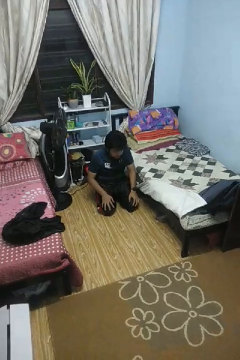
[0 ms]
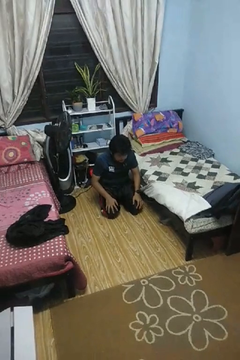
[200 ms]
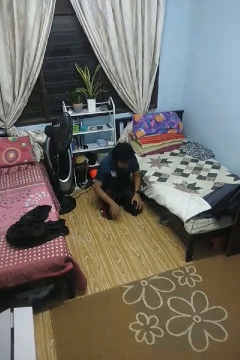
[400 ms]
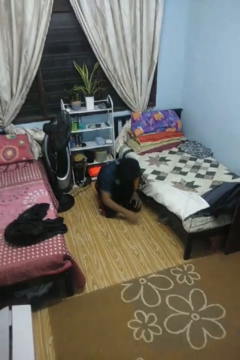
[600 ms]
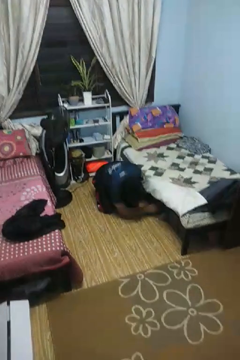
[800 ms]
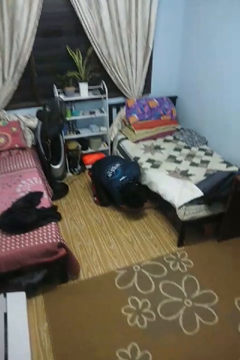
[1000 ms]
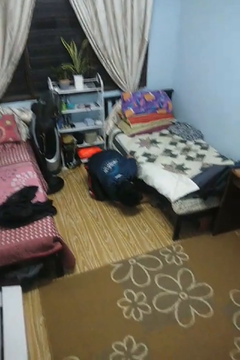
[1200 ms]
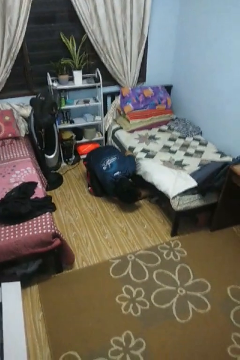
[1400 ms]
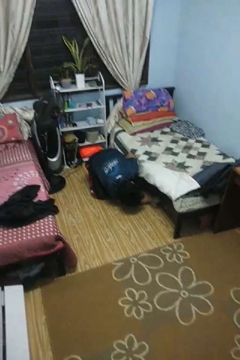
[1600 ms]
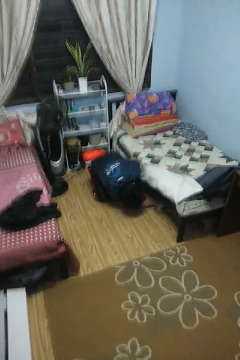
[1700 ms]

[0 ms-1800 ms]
person searches under bed

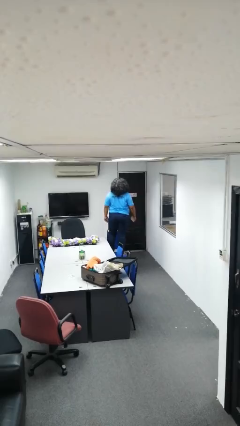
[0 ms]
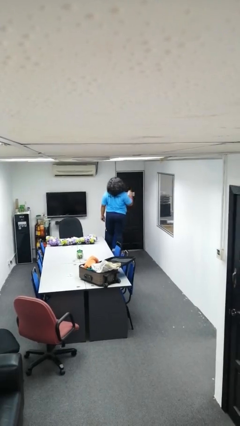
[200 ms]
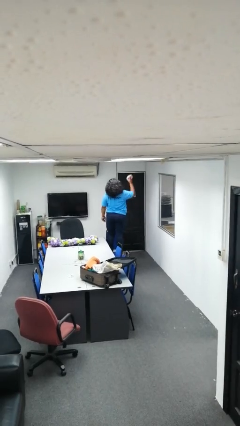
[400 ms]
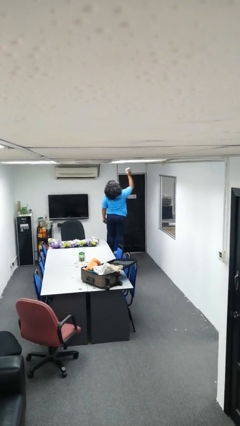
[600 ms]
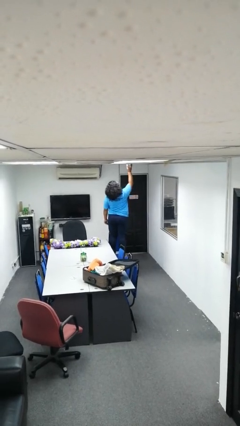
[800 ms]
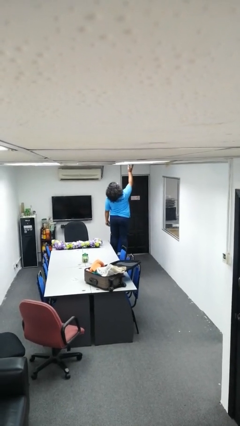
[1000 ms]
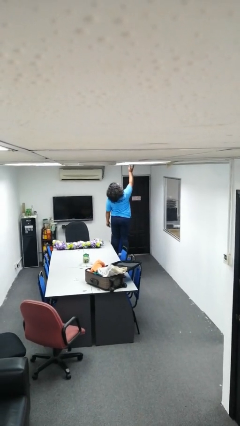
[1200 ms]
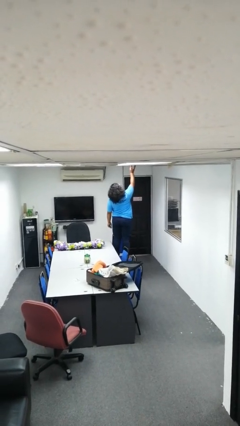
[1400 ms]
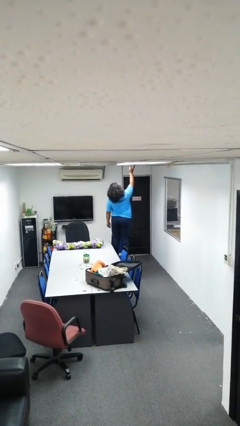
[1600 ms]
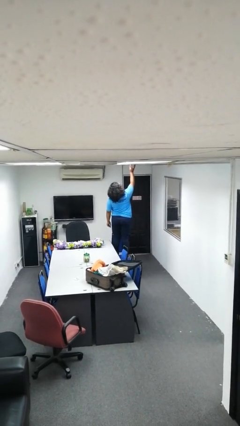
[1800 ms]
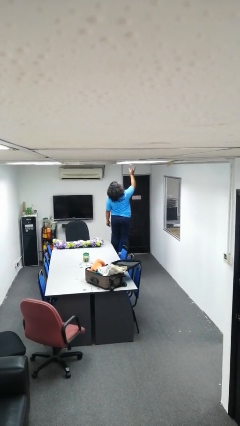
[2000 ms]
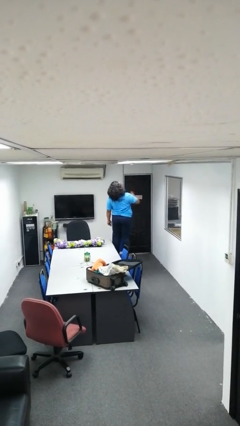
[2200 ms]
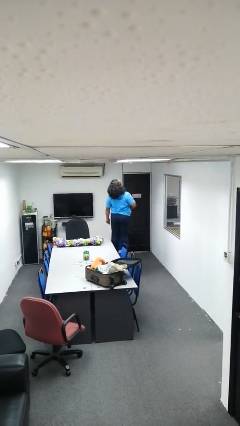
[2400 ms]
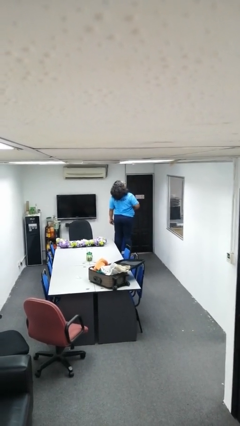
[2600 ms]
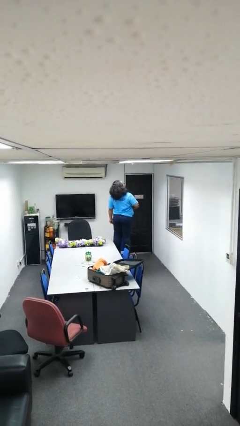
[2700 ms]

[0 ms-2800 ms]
person puts up smoke detector

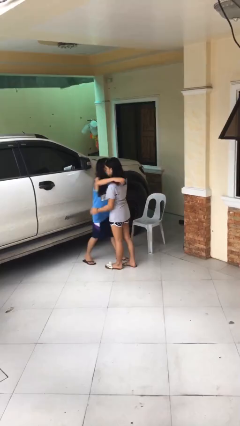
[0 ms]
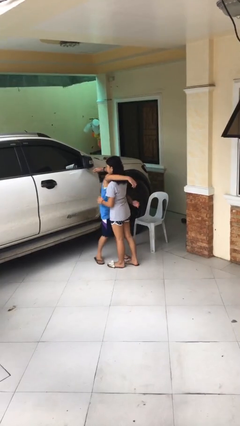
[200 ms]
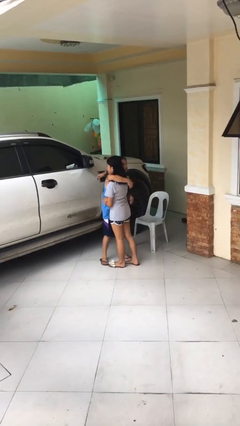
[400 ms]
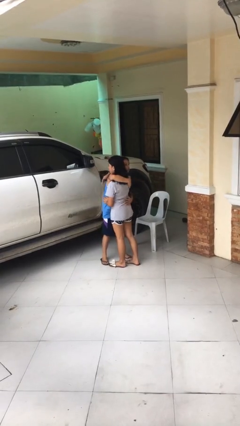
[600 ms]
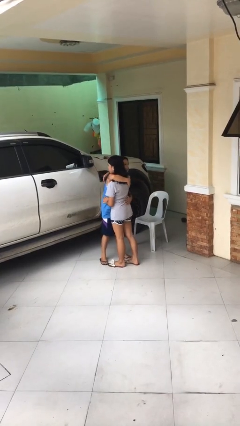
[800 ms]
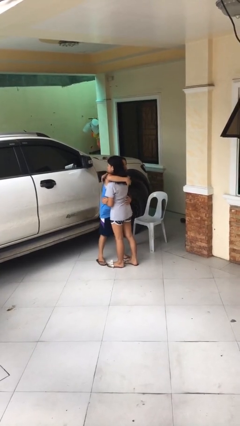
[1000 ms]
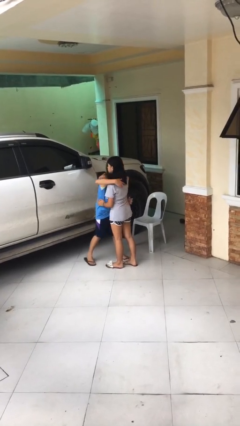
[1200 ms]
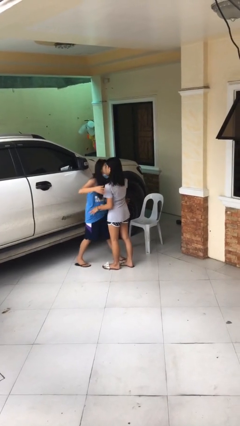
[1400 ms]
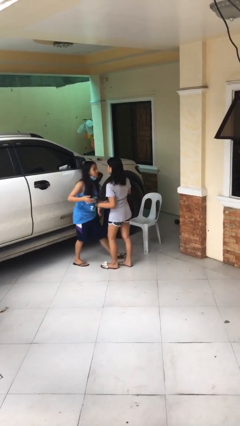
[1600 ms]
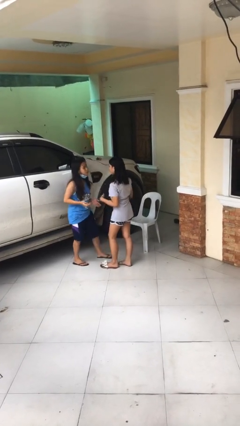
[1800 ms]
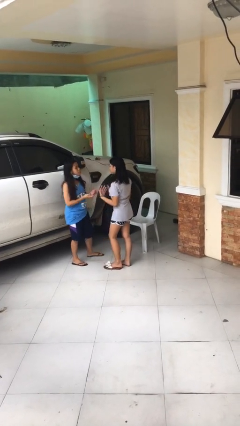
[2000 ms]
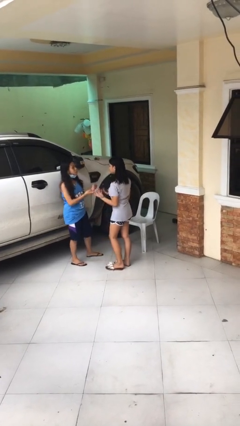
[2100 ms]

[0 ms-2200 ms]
person embraces person

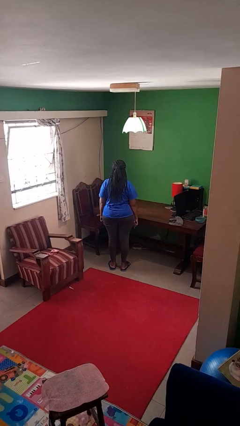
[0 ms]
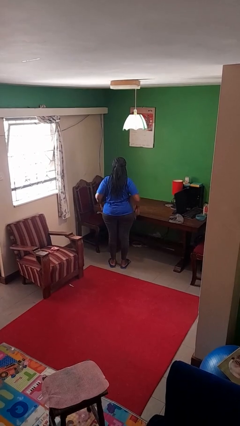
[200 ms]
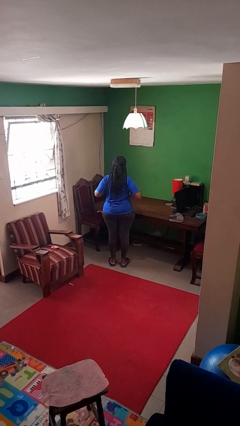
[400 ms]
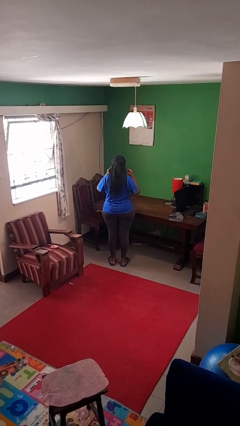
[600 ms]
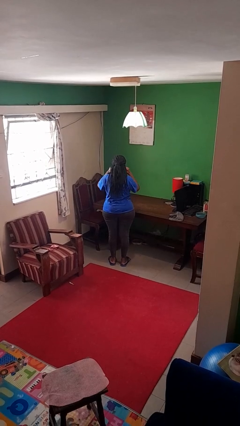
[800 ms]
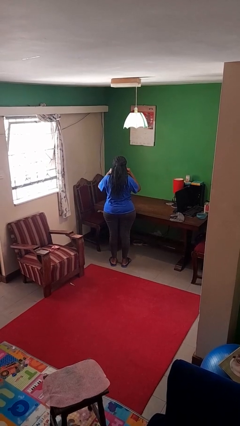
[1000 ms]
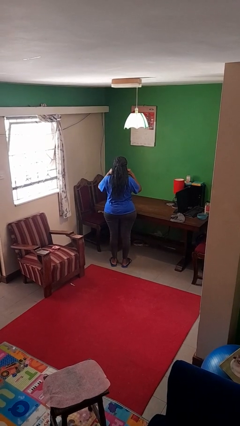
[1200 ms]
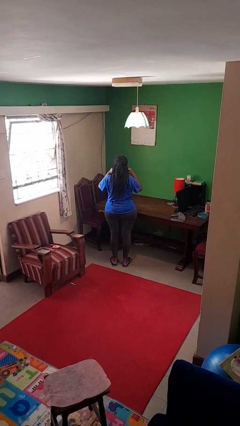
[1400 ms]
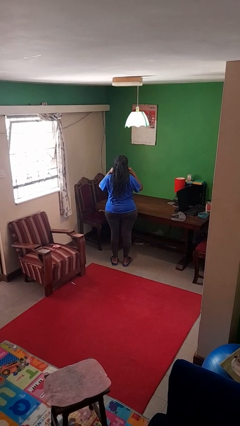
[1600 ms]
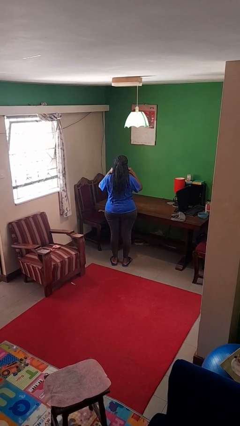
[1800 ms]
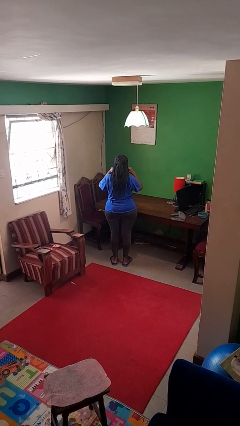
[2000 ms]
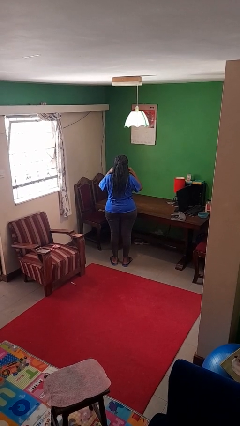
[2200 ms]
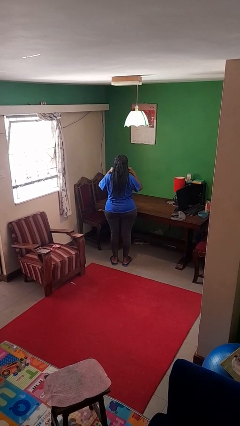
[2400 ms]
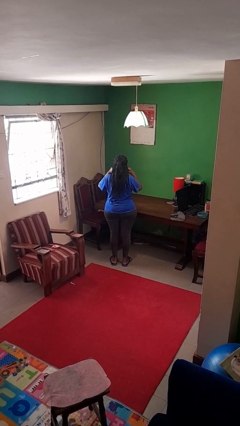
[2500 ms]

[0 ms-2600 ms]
person puts fingers in ear

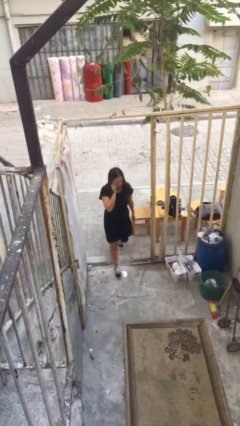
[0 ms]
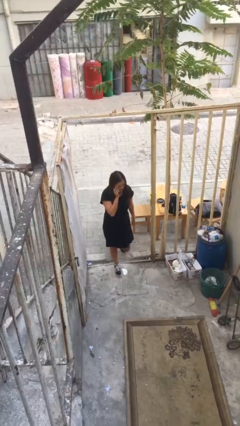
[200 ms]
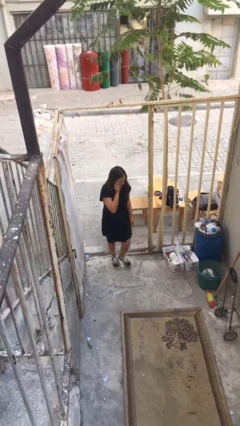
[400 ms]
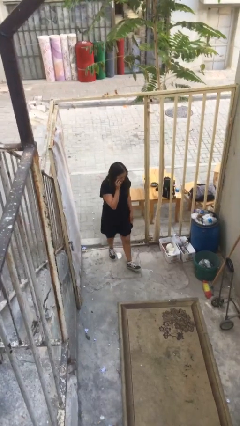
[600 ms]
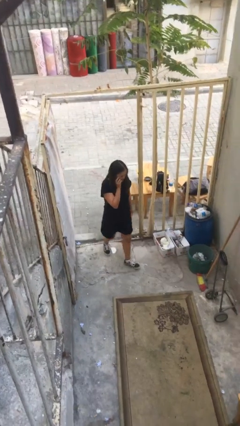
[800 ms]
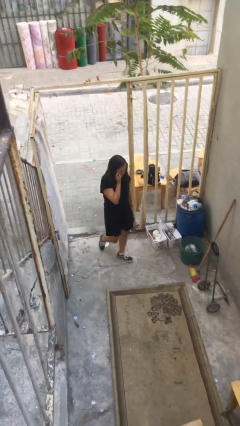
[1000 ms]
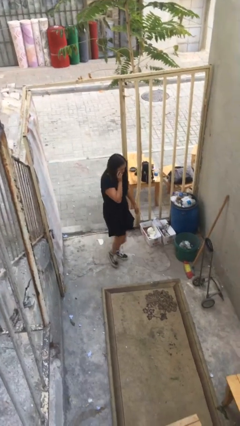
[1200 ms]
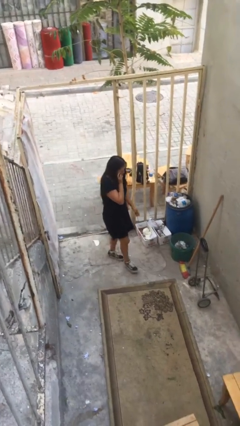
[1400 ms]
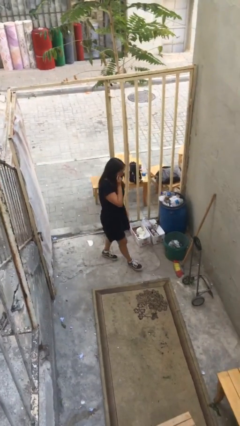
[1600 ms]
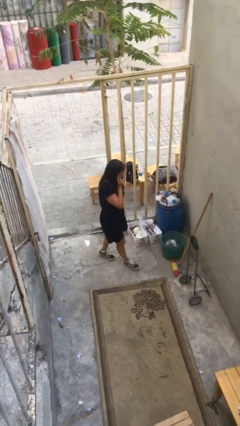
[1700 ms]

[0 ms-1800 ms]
person enters scene through structure

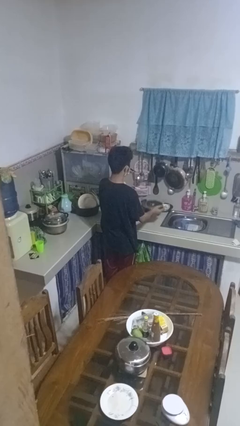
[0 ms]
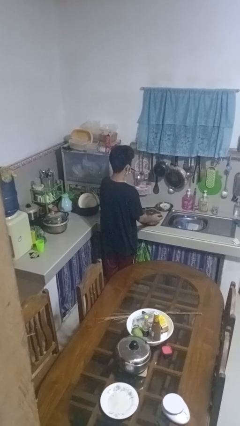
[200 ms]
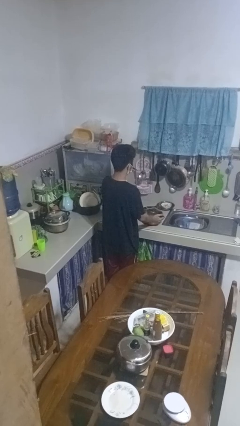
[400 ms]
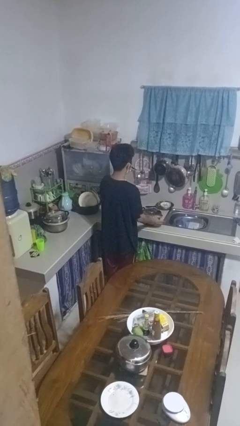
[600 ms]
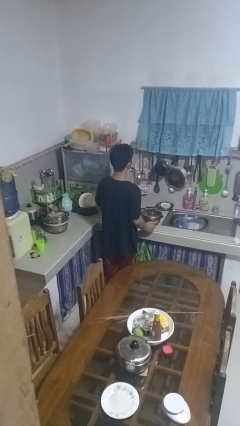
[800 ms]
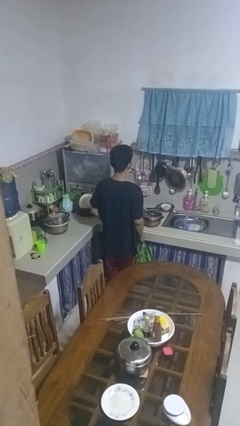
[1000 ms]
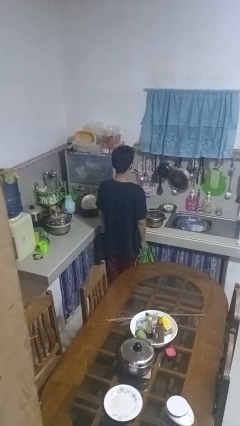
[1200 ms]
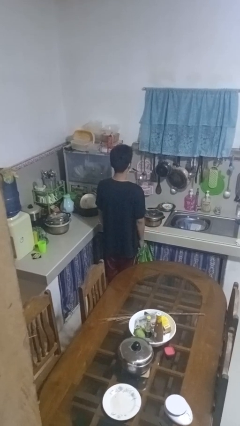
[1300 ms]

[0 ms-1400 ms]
person puts down object on countertop

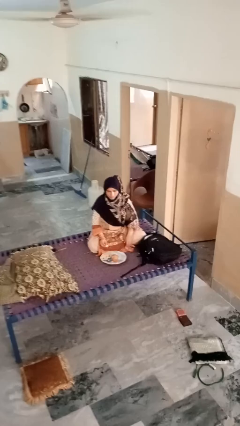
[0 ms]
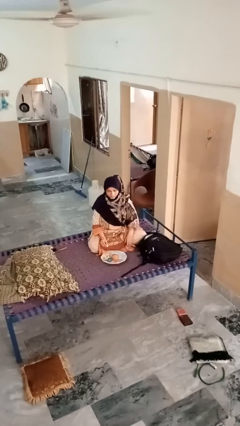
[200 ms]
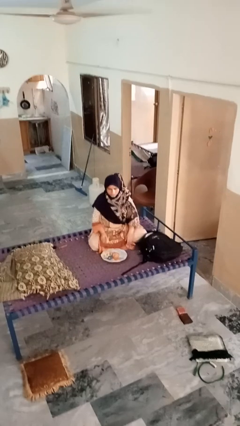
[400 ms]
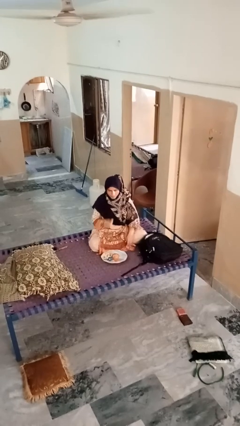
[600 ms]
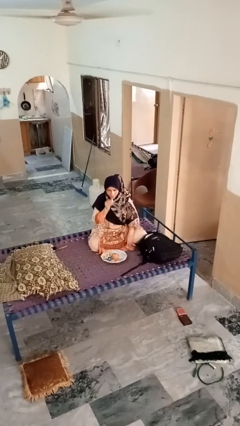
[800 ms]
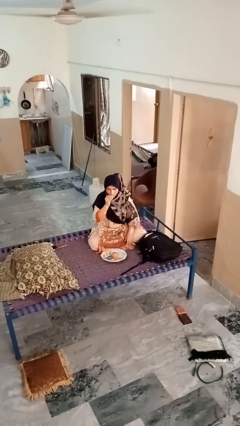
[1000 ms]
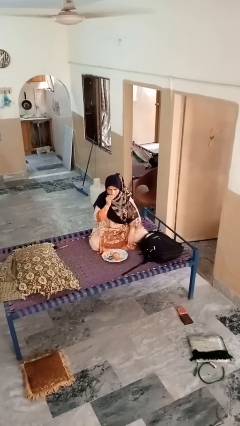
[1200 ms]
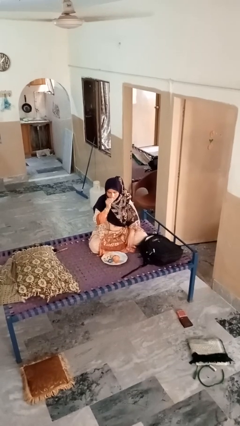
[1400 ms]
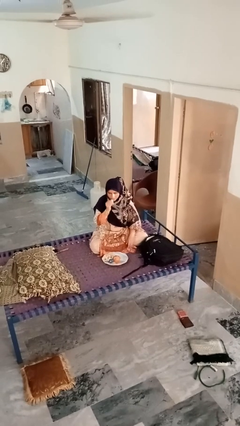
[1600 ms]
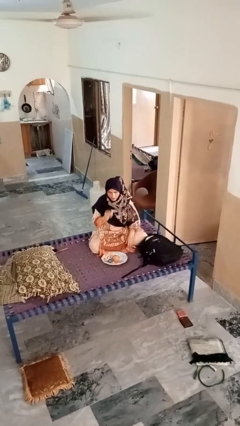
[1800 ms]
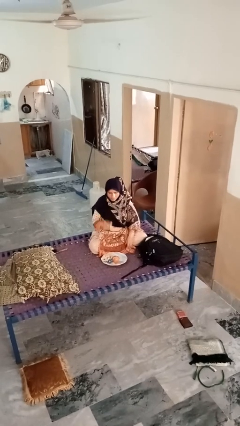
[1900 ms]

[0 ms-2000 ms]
person eats apple

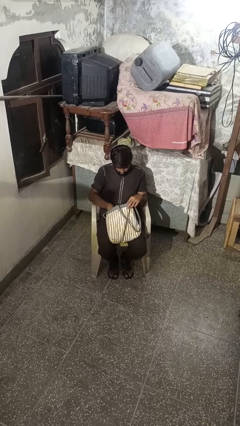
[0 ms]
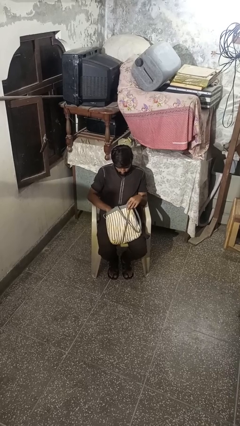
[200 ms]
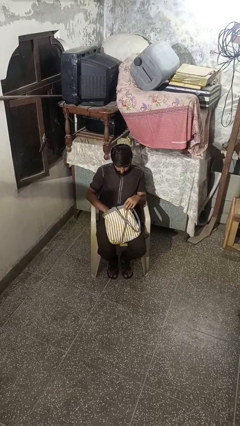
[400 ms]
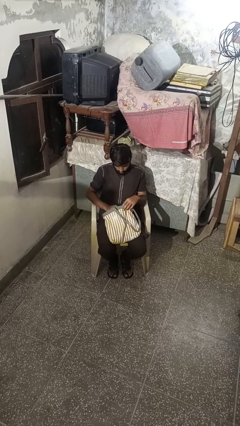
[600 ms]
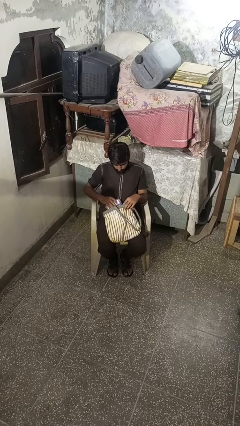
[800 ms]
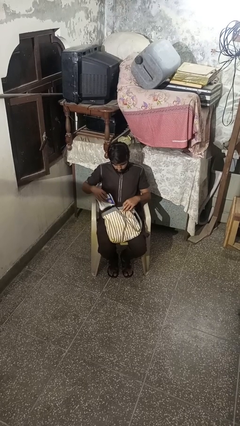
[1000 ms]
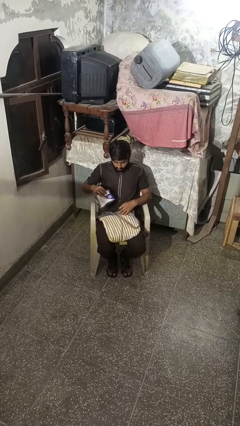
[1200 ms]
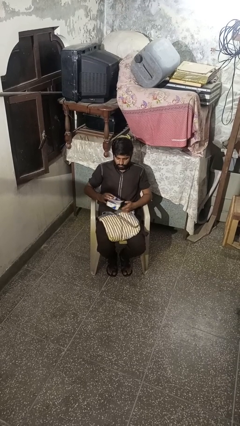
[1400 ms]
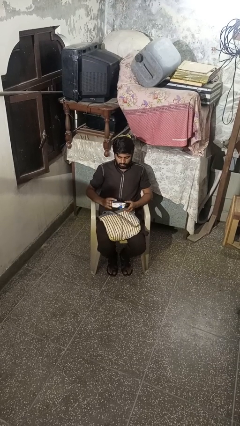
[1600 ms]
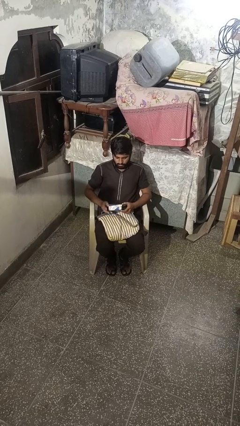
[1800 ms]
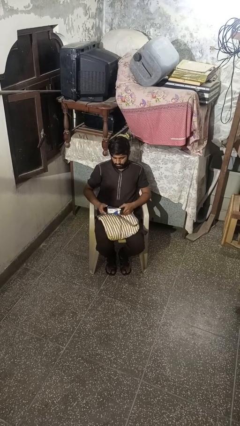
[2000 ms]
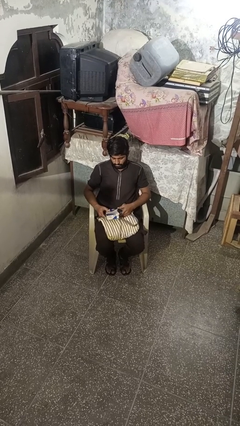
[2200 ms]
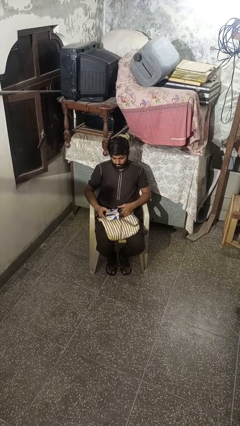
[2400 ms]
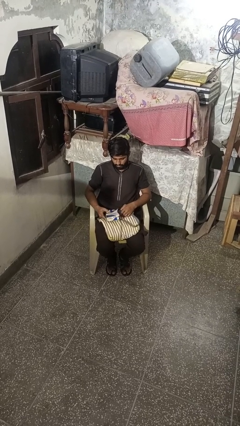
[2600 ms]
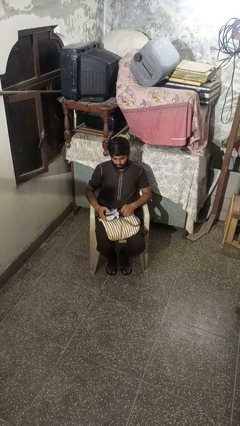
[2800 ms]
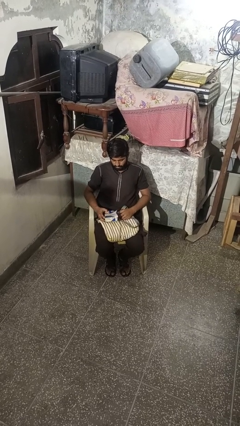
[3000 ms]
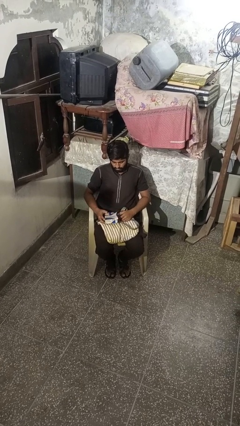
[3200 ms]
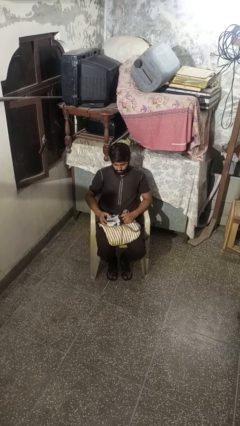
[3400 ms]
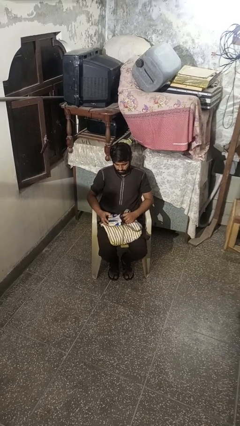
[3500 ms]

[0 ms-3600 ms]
person takes object from backpack
